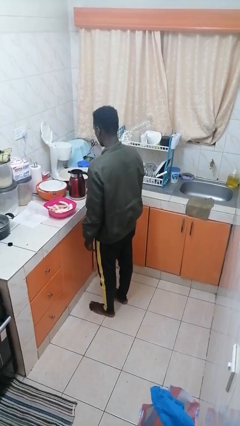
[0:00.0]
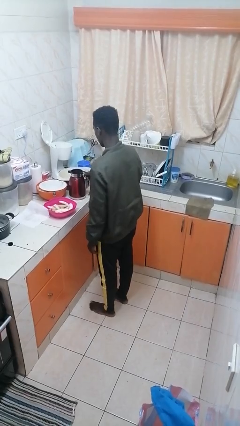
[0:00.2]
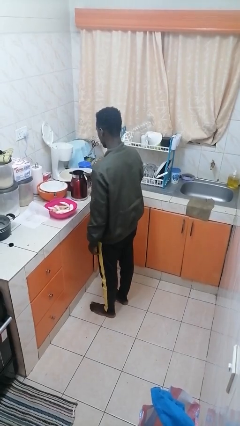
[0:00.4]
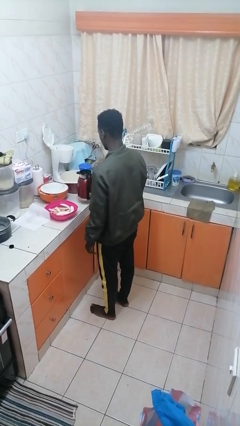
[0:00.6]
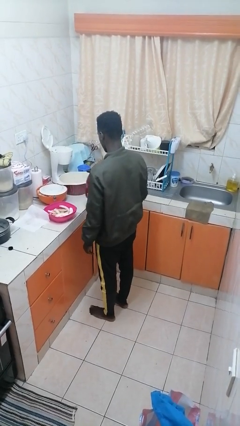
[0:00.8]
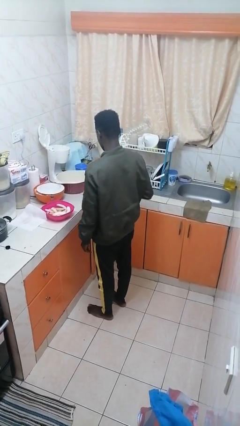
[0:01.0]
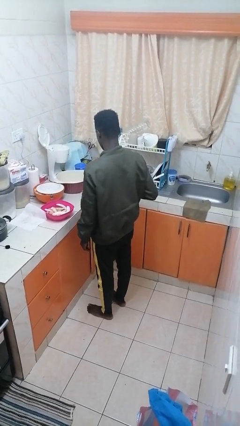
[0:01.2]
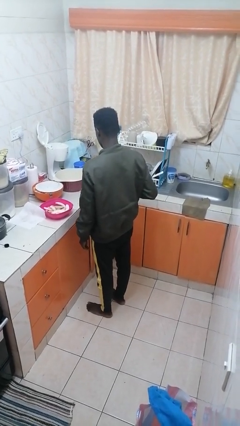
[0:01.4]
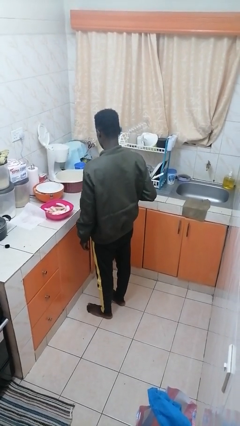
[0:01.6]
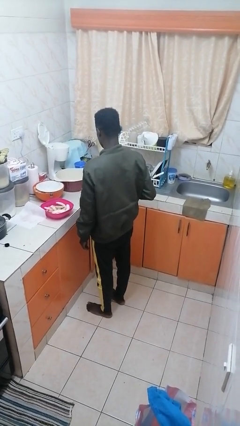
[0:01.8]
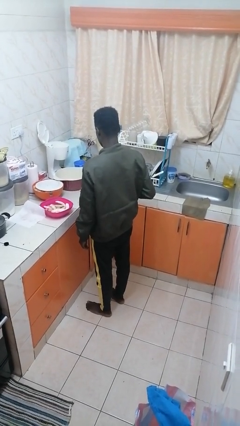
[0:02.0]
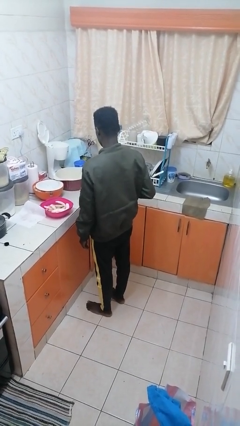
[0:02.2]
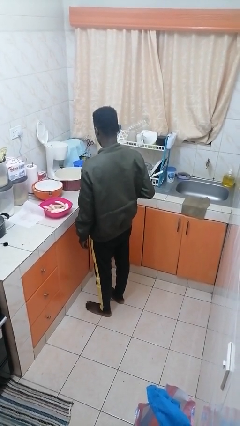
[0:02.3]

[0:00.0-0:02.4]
person picks up object from countertop

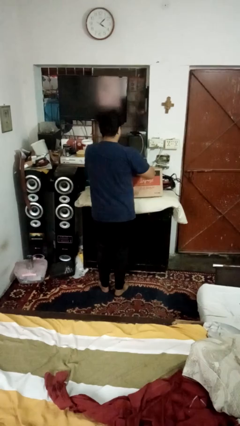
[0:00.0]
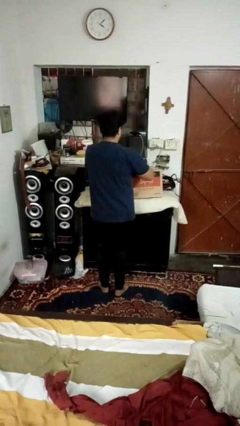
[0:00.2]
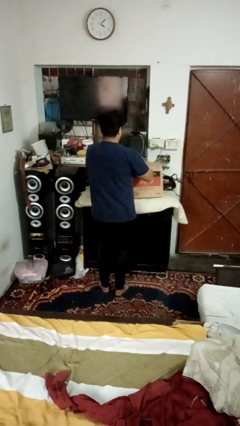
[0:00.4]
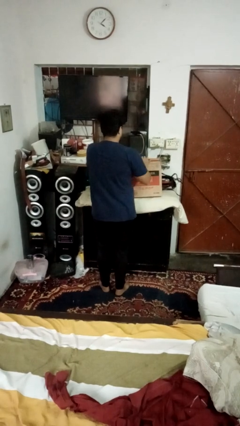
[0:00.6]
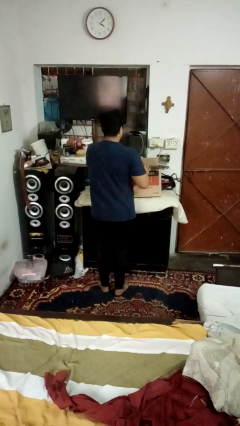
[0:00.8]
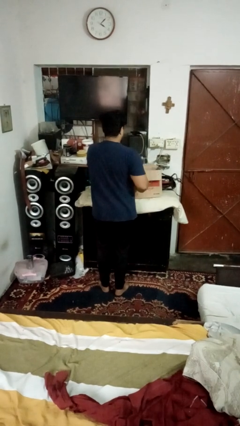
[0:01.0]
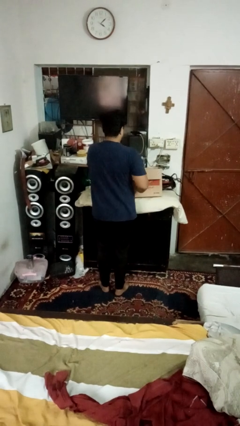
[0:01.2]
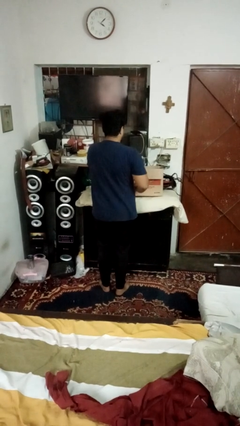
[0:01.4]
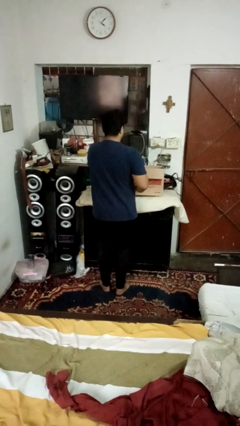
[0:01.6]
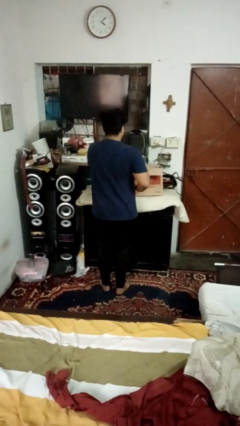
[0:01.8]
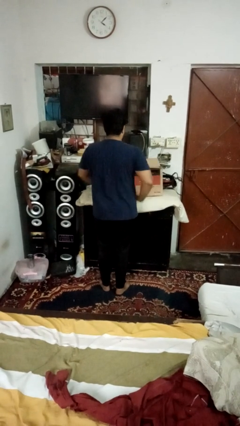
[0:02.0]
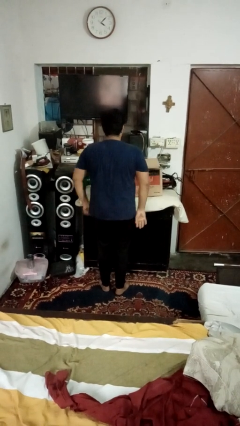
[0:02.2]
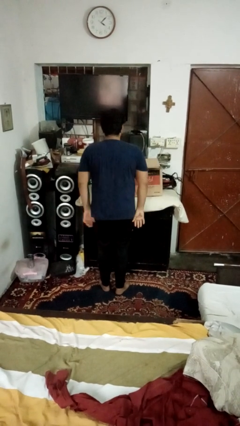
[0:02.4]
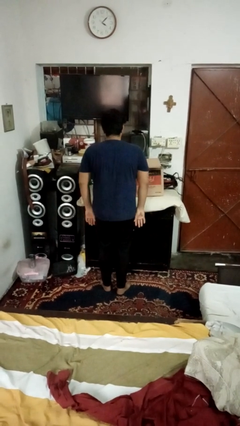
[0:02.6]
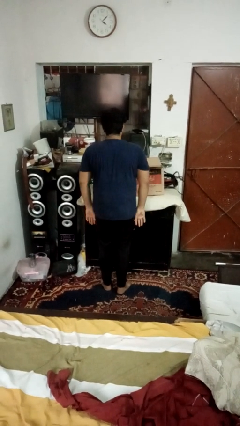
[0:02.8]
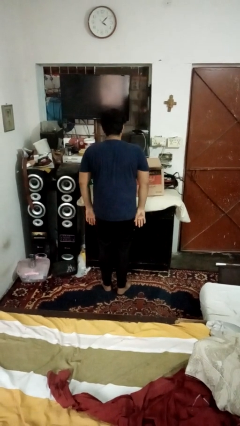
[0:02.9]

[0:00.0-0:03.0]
person opens box

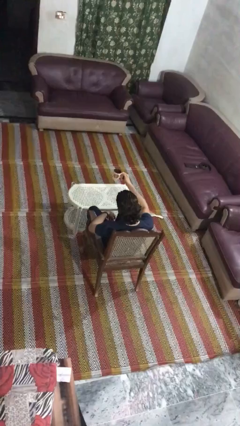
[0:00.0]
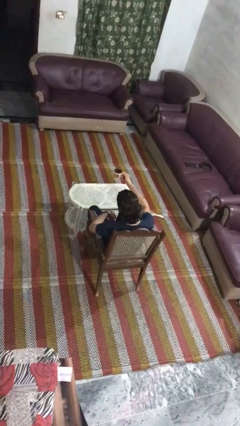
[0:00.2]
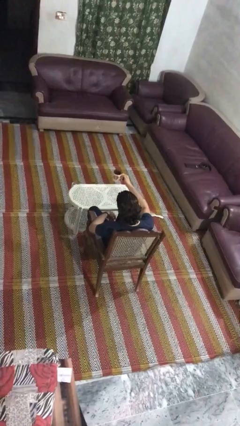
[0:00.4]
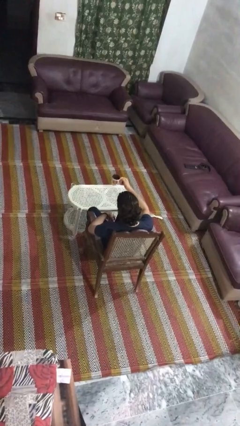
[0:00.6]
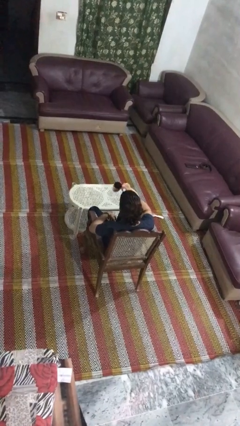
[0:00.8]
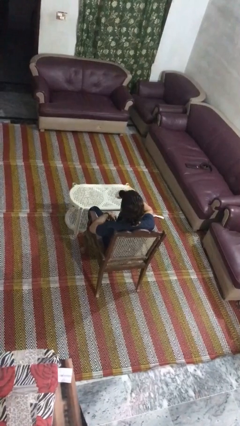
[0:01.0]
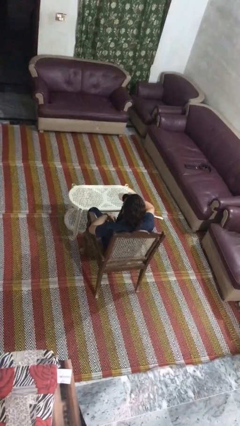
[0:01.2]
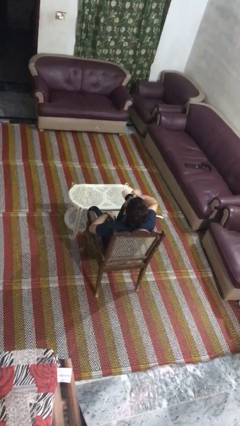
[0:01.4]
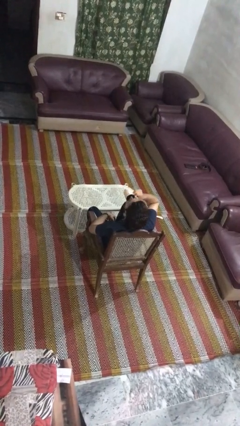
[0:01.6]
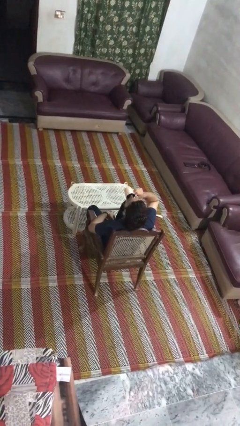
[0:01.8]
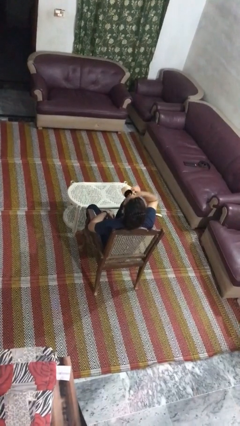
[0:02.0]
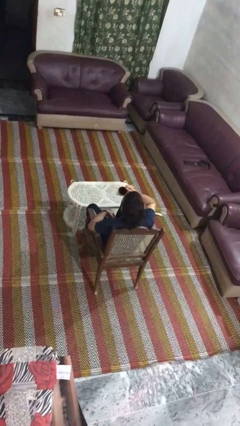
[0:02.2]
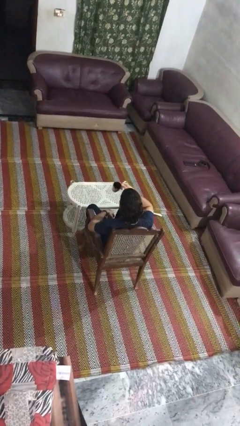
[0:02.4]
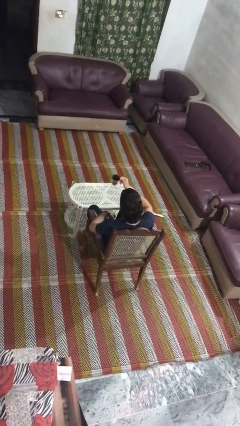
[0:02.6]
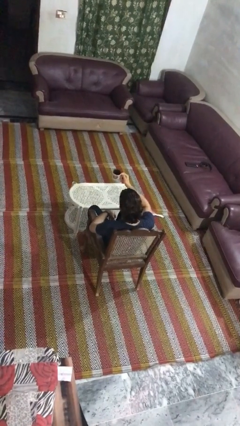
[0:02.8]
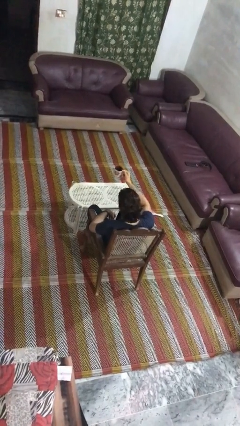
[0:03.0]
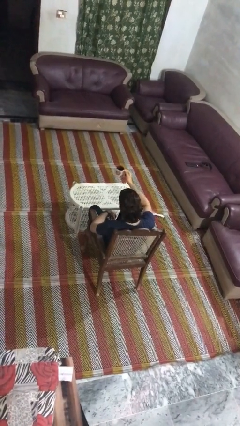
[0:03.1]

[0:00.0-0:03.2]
person drinks from mug

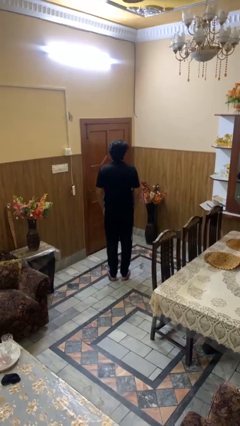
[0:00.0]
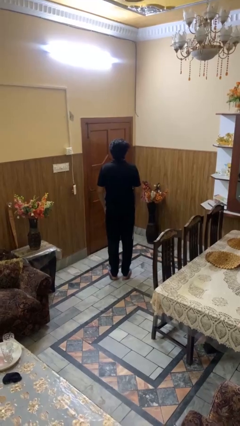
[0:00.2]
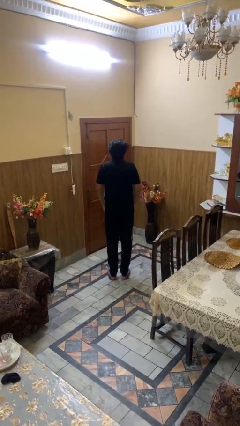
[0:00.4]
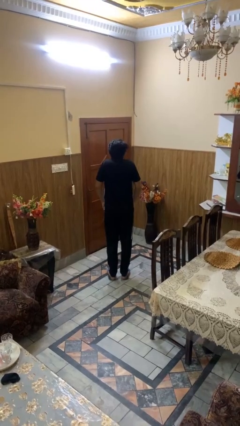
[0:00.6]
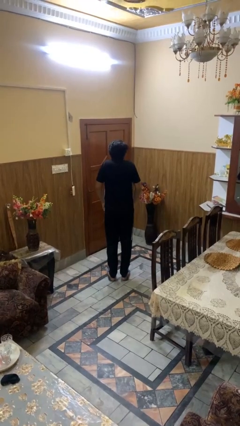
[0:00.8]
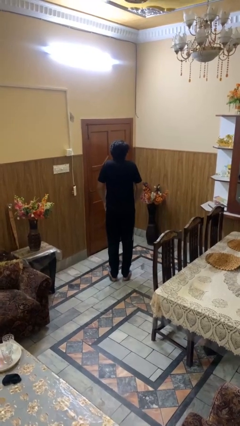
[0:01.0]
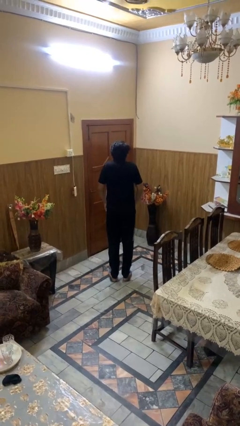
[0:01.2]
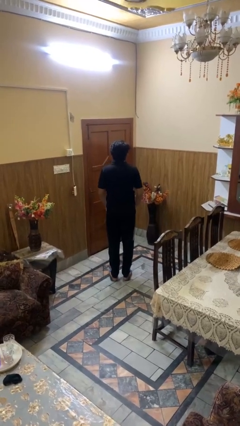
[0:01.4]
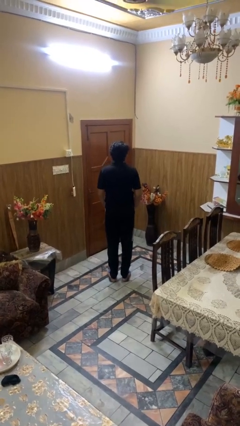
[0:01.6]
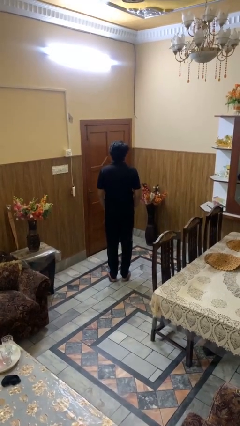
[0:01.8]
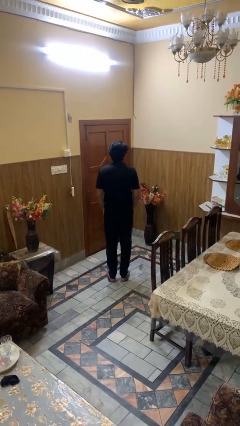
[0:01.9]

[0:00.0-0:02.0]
person shrugs

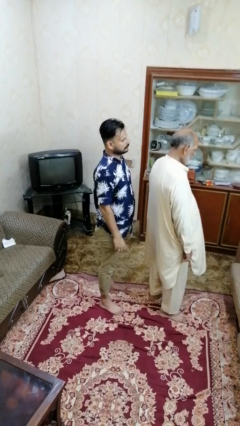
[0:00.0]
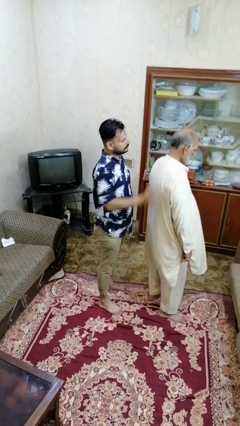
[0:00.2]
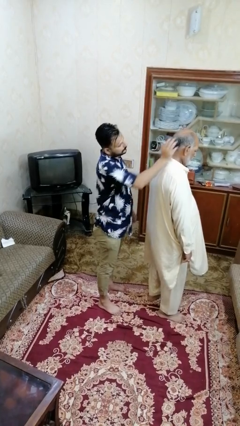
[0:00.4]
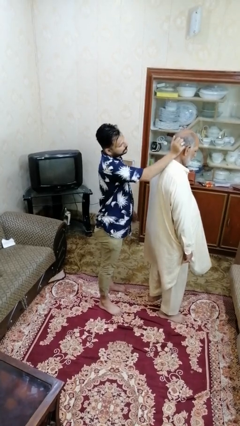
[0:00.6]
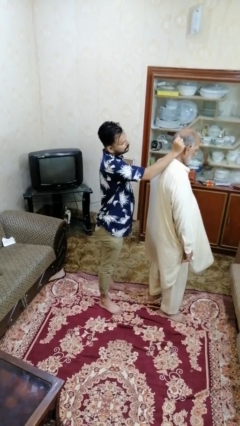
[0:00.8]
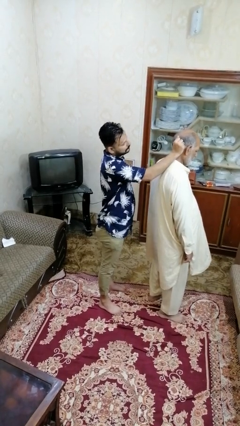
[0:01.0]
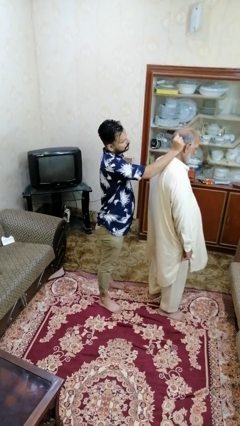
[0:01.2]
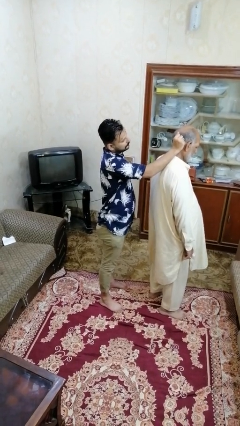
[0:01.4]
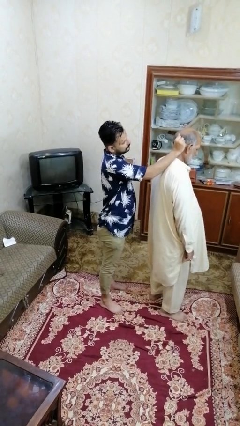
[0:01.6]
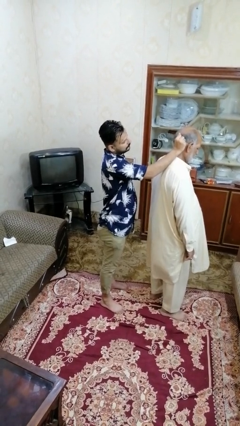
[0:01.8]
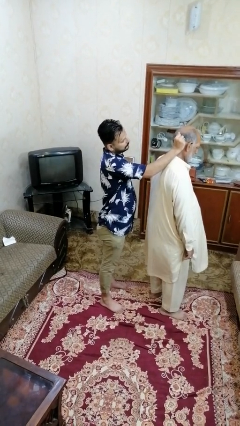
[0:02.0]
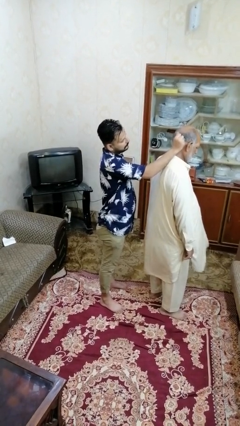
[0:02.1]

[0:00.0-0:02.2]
person grabs person by hair

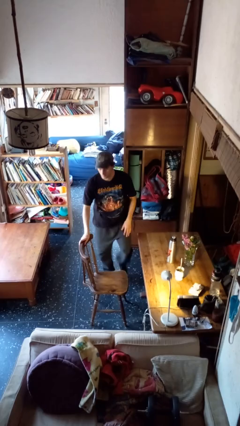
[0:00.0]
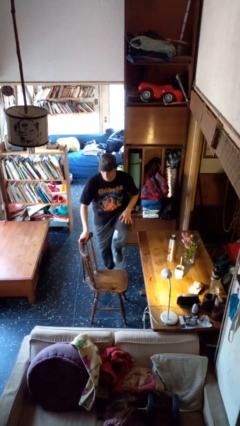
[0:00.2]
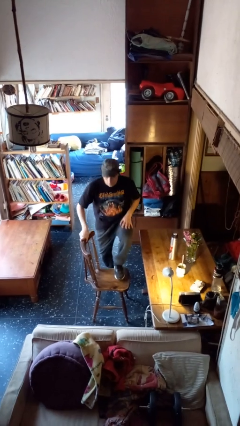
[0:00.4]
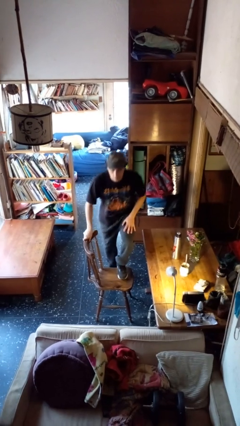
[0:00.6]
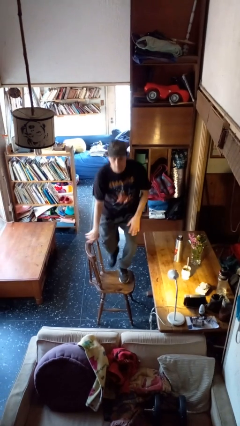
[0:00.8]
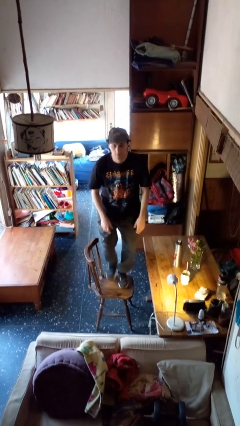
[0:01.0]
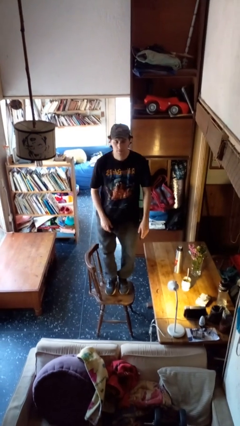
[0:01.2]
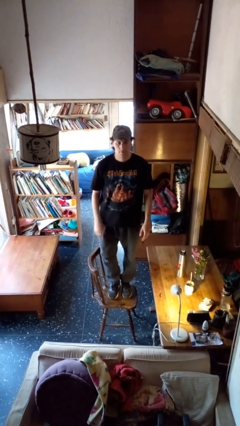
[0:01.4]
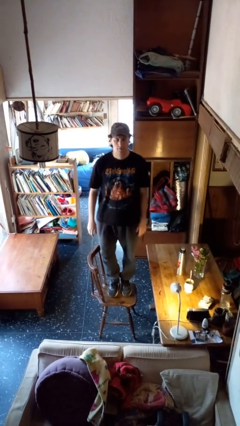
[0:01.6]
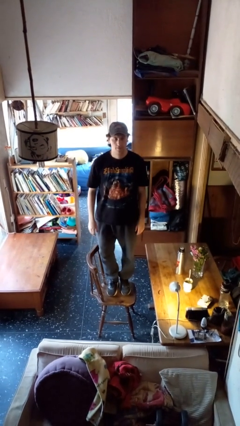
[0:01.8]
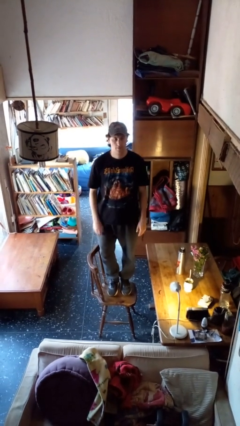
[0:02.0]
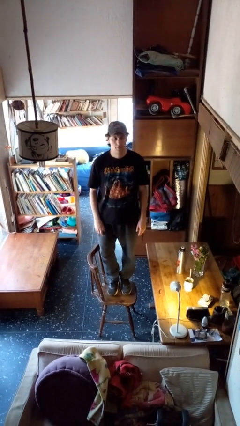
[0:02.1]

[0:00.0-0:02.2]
person climbs on chair

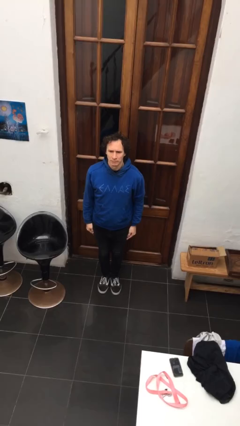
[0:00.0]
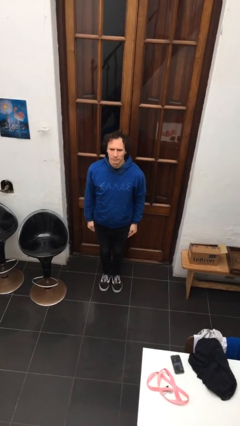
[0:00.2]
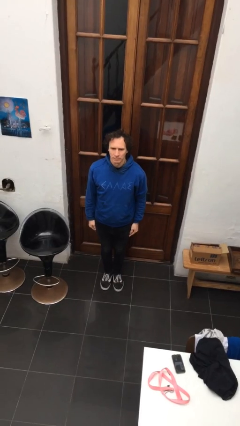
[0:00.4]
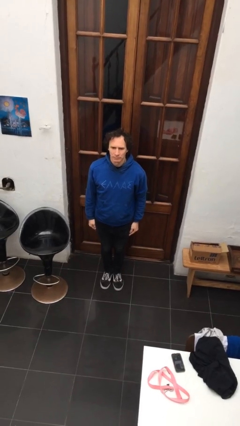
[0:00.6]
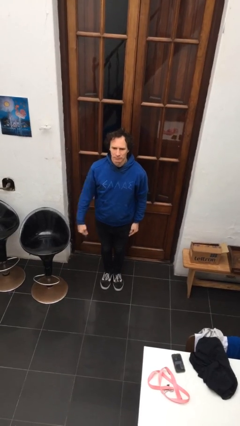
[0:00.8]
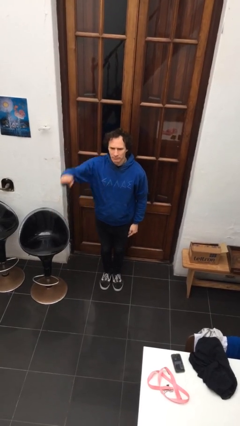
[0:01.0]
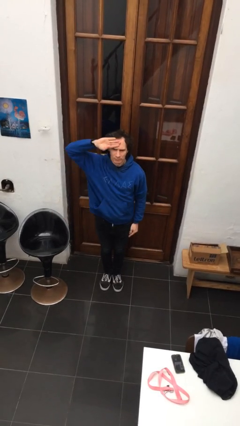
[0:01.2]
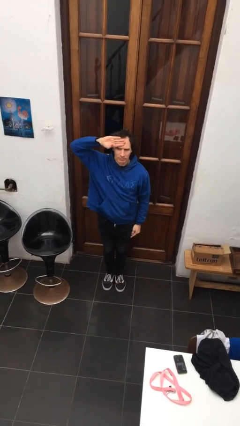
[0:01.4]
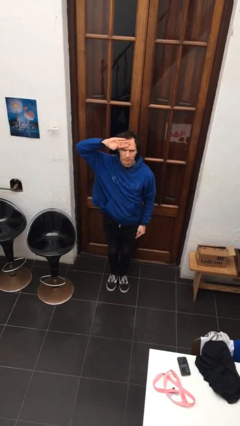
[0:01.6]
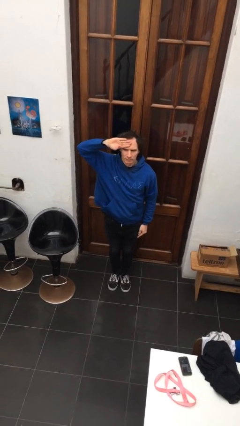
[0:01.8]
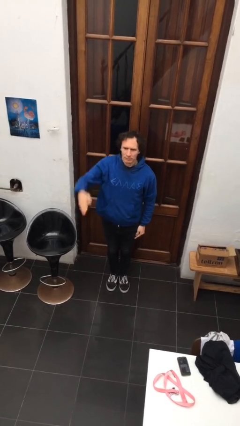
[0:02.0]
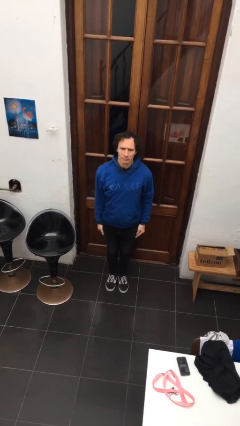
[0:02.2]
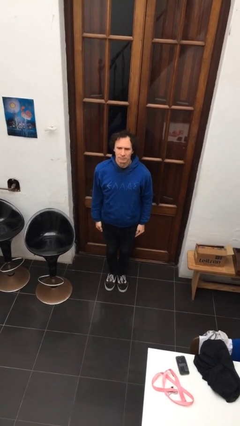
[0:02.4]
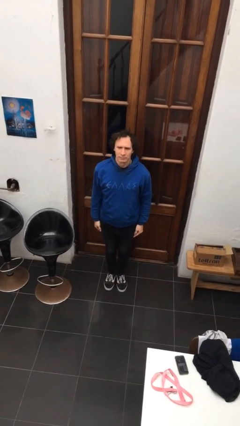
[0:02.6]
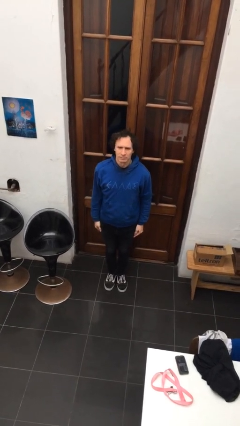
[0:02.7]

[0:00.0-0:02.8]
person salutes
